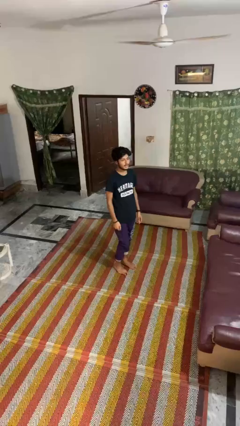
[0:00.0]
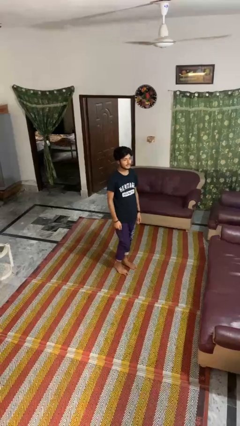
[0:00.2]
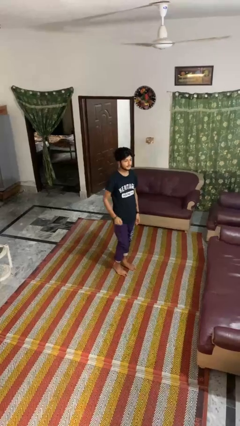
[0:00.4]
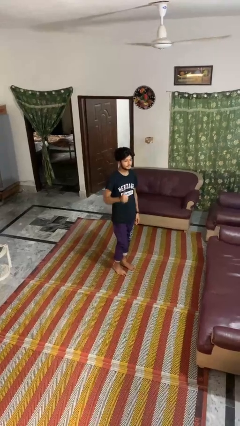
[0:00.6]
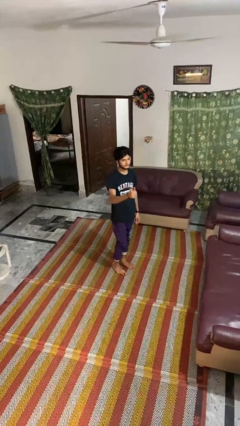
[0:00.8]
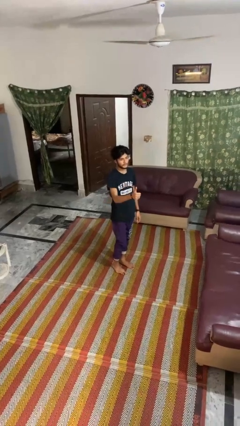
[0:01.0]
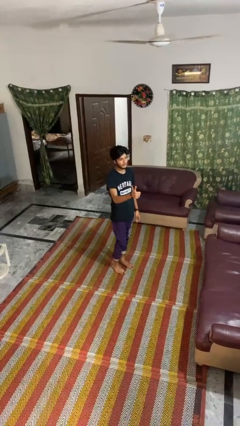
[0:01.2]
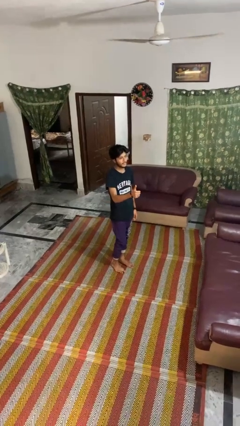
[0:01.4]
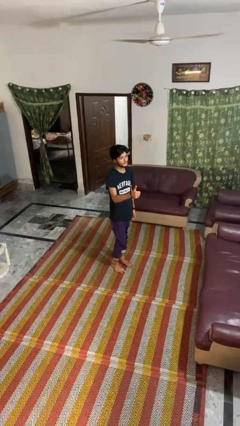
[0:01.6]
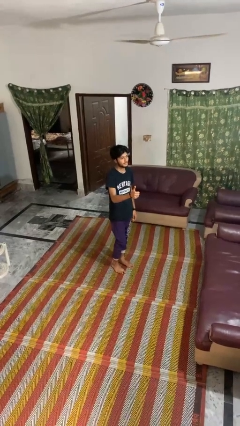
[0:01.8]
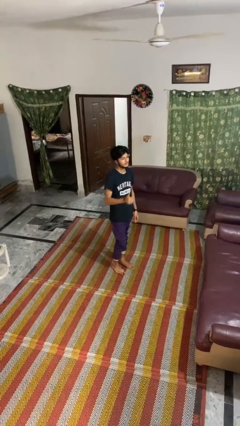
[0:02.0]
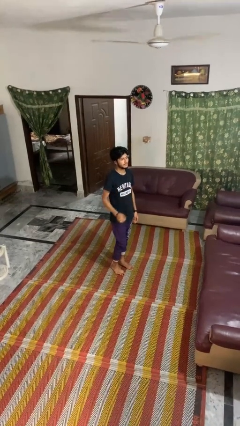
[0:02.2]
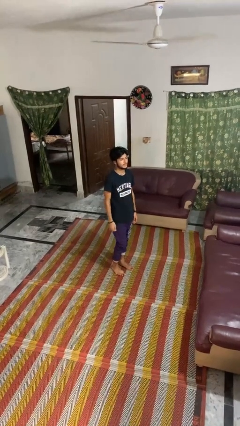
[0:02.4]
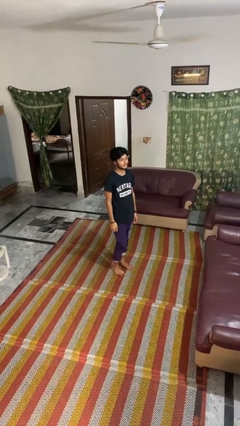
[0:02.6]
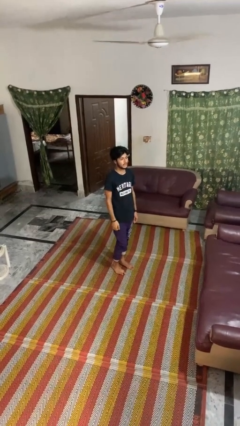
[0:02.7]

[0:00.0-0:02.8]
person gestures thumbs up

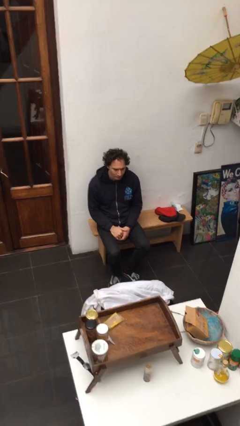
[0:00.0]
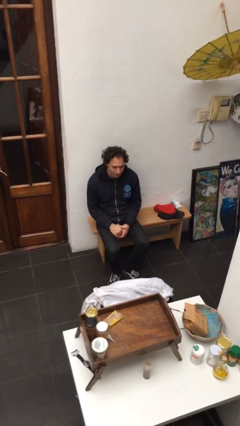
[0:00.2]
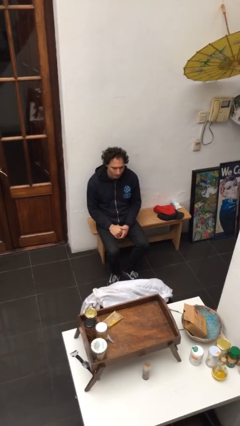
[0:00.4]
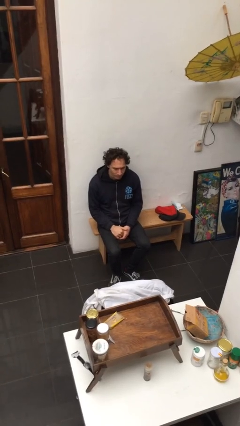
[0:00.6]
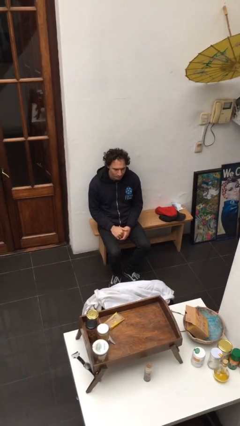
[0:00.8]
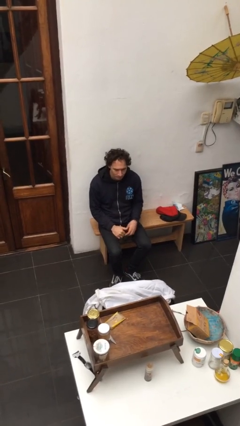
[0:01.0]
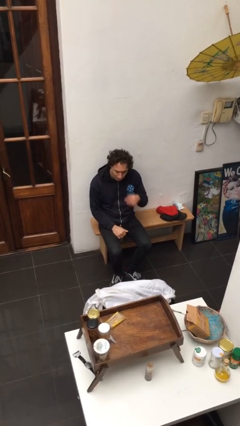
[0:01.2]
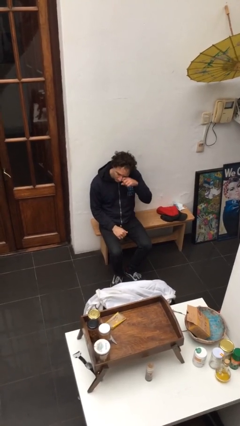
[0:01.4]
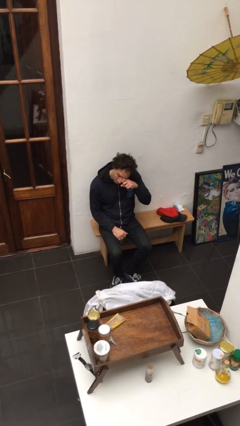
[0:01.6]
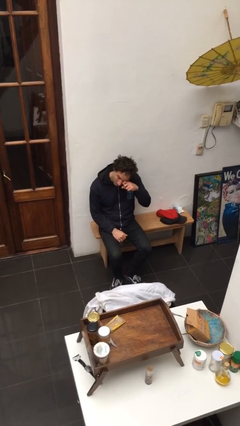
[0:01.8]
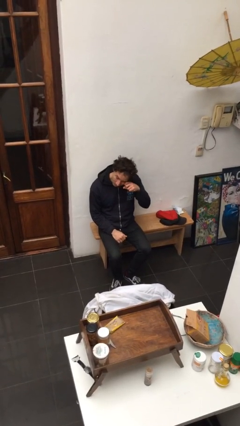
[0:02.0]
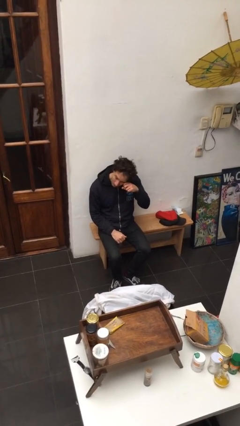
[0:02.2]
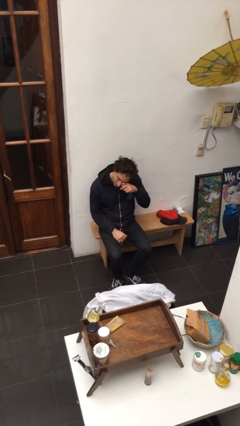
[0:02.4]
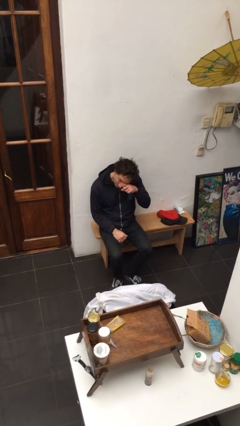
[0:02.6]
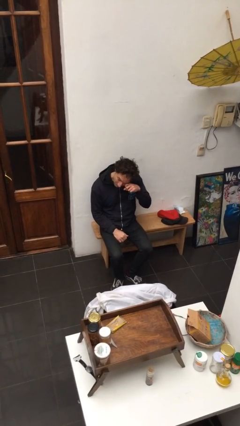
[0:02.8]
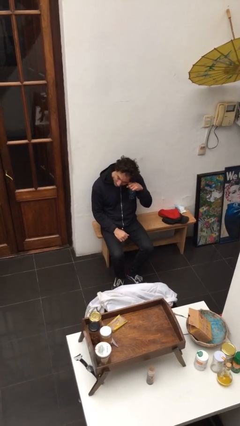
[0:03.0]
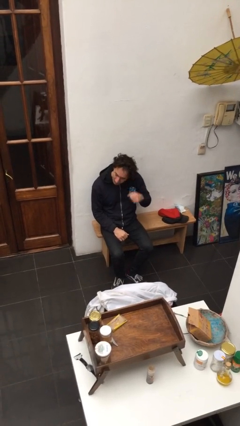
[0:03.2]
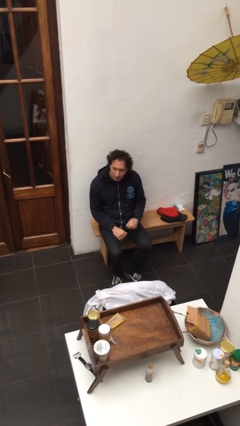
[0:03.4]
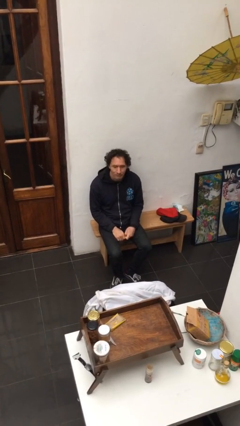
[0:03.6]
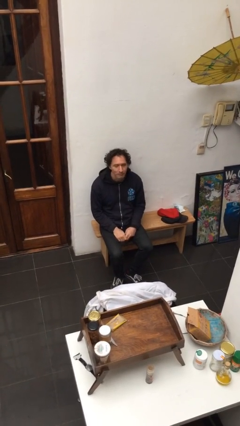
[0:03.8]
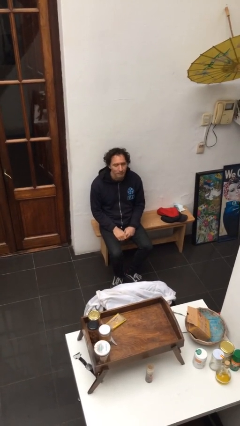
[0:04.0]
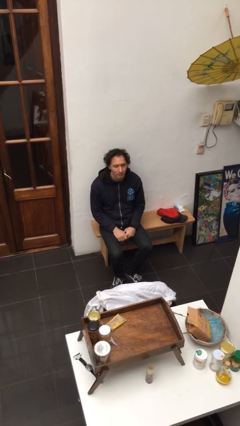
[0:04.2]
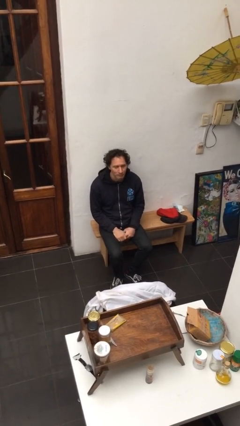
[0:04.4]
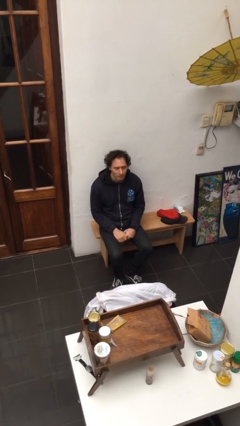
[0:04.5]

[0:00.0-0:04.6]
person scratches face

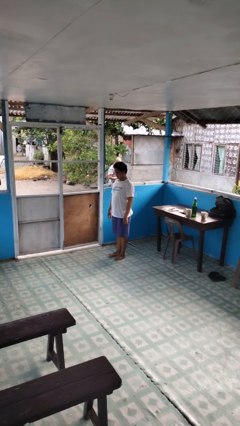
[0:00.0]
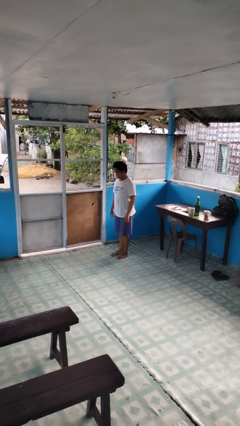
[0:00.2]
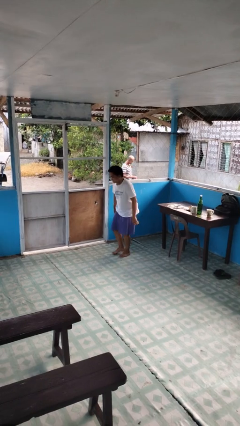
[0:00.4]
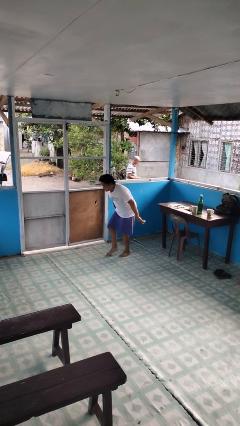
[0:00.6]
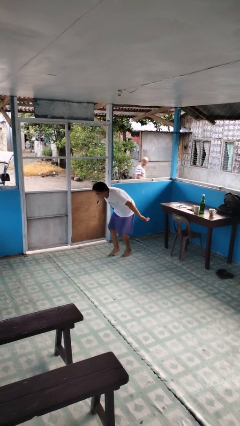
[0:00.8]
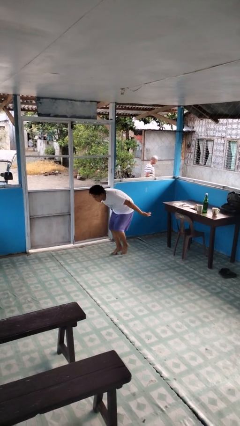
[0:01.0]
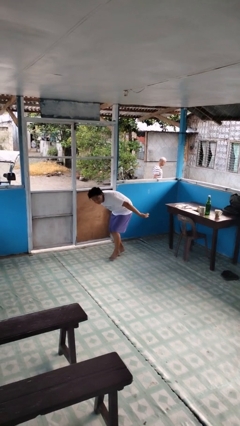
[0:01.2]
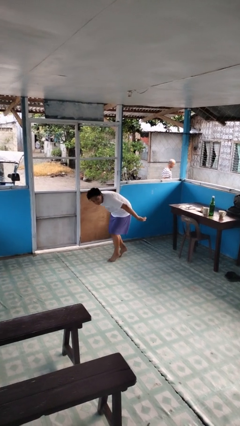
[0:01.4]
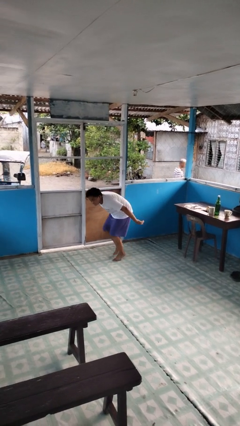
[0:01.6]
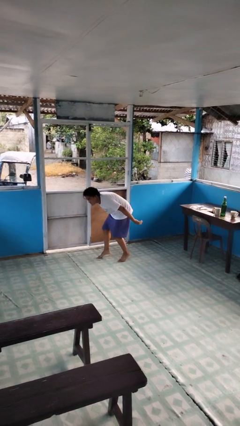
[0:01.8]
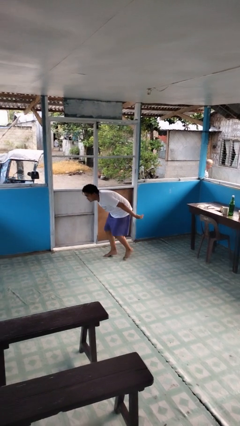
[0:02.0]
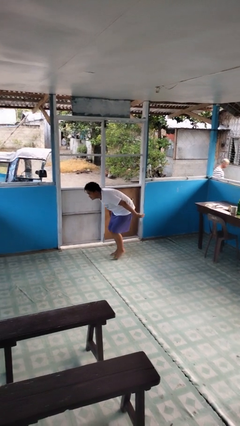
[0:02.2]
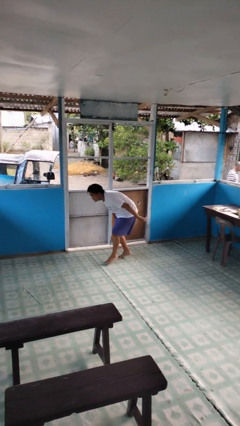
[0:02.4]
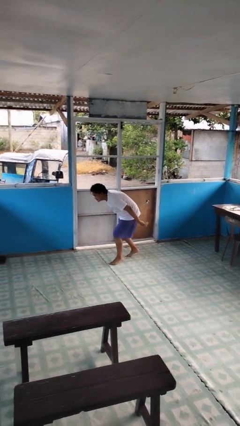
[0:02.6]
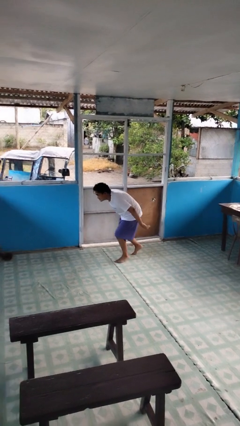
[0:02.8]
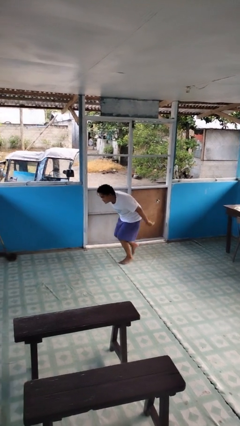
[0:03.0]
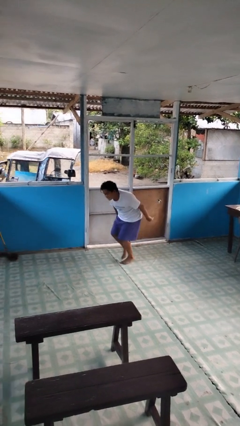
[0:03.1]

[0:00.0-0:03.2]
person walks tiptoe

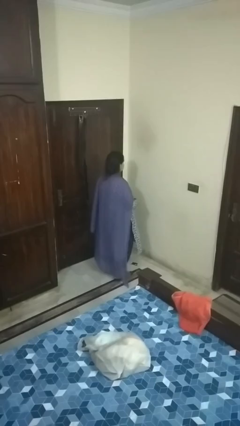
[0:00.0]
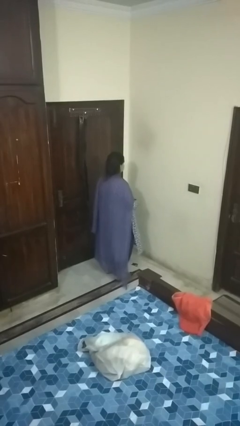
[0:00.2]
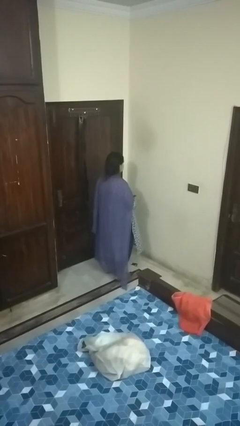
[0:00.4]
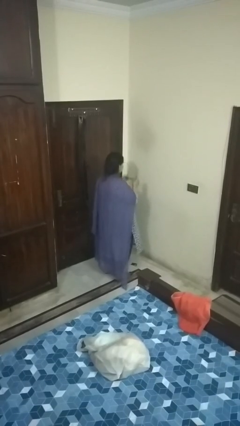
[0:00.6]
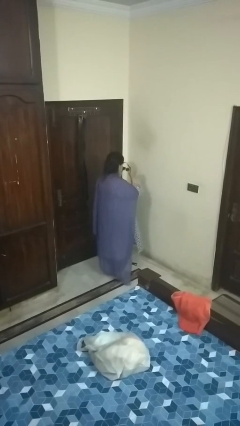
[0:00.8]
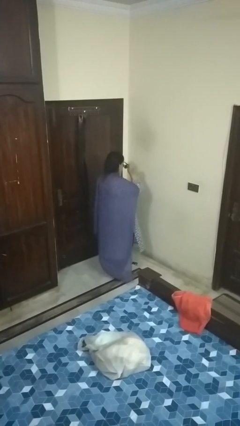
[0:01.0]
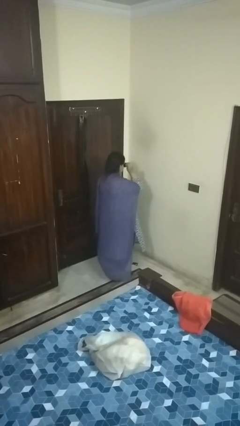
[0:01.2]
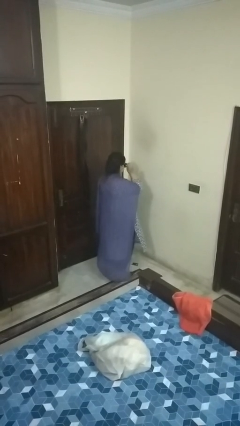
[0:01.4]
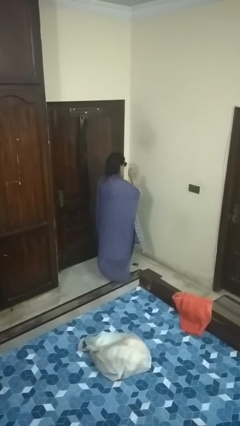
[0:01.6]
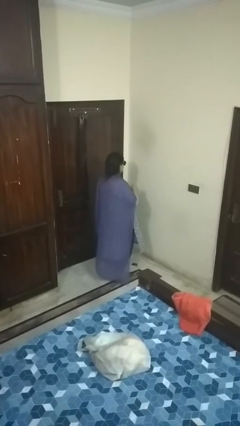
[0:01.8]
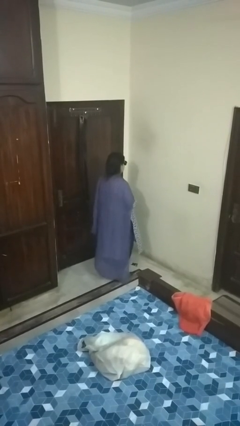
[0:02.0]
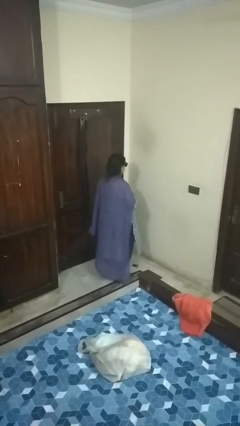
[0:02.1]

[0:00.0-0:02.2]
person puts on sunglasses

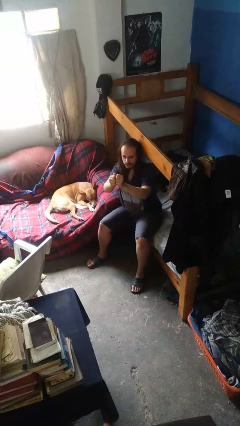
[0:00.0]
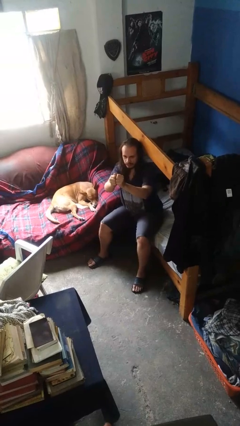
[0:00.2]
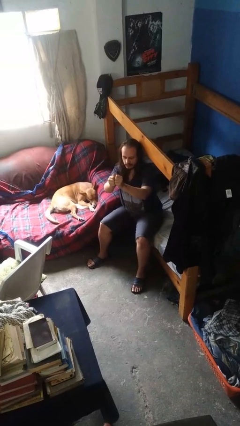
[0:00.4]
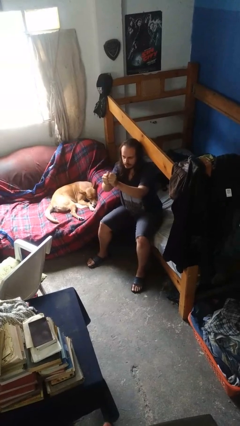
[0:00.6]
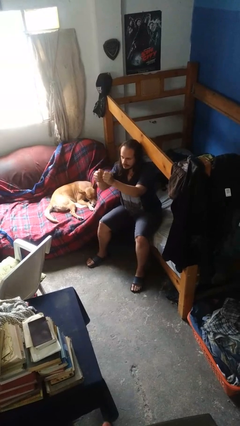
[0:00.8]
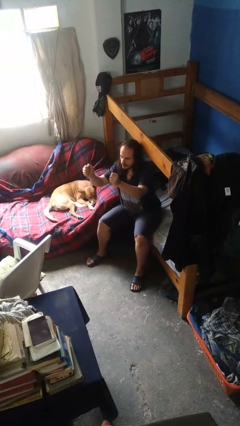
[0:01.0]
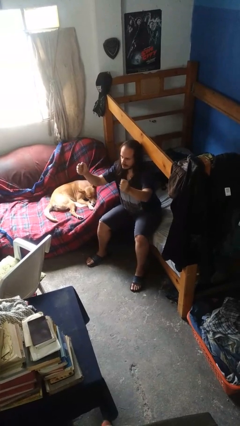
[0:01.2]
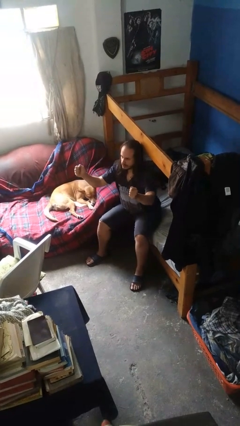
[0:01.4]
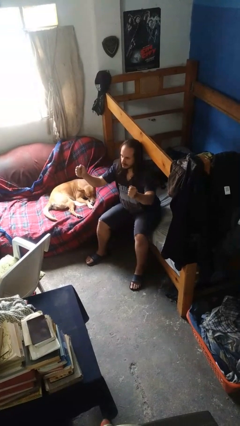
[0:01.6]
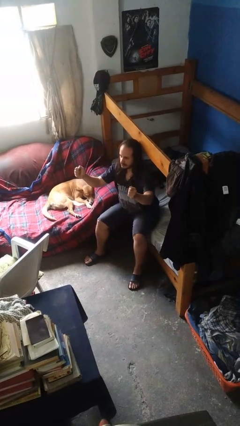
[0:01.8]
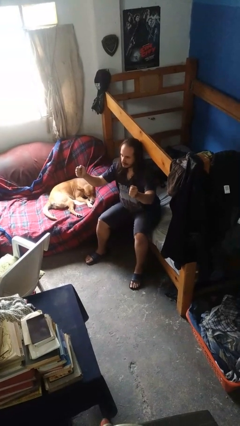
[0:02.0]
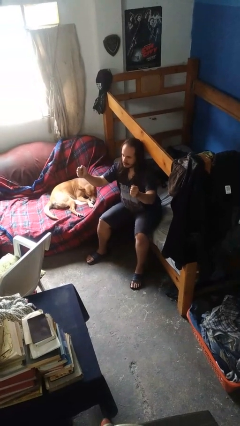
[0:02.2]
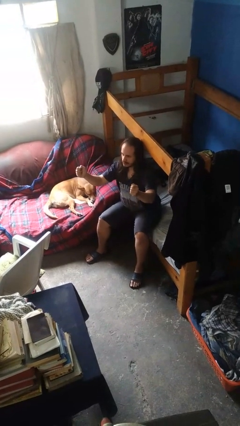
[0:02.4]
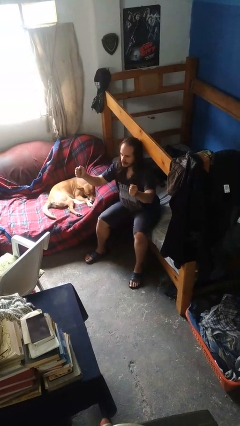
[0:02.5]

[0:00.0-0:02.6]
person gestures zoom in

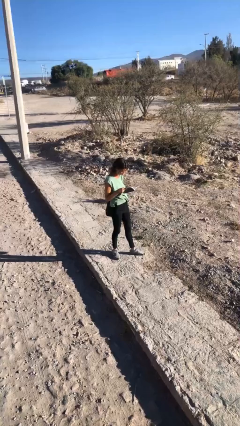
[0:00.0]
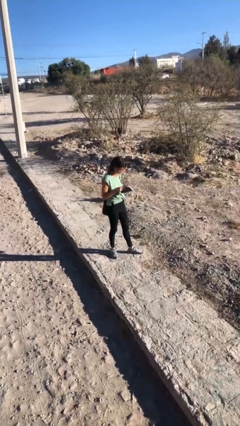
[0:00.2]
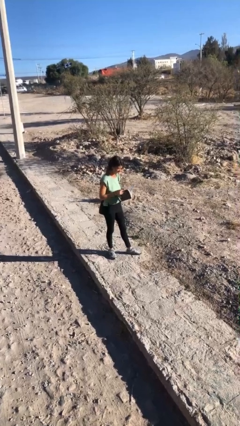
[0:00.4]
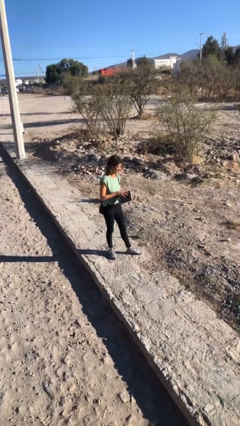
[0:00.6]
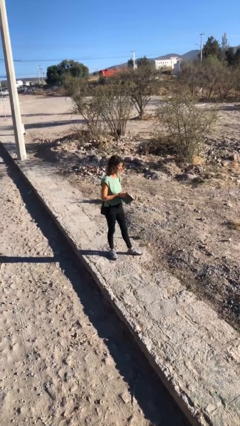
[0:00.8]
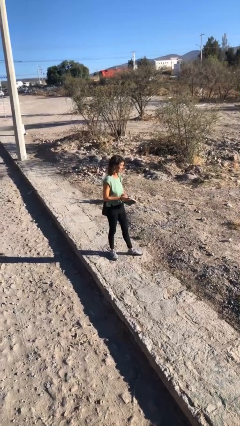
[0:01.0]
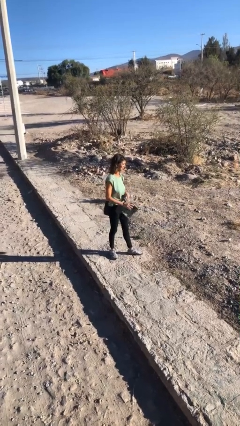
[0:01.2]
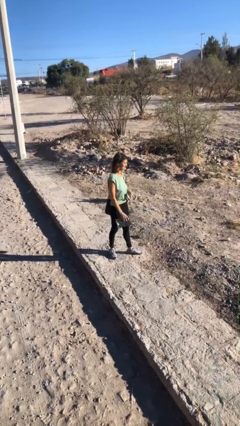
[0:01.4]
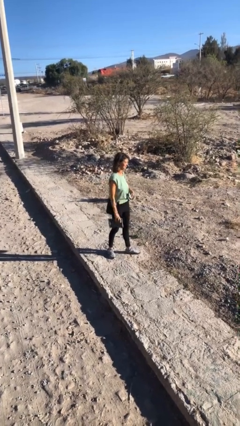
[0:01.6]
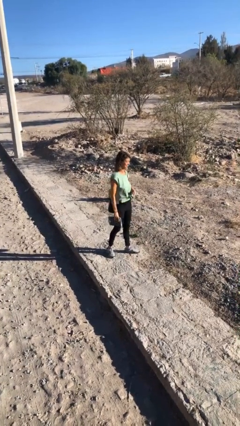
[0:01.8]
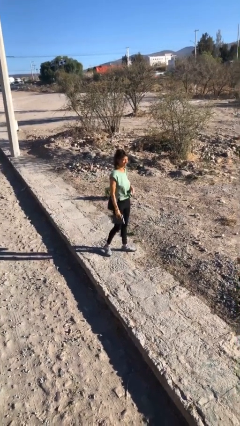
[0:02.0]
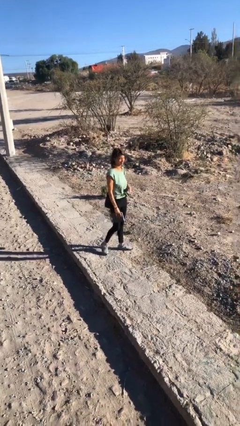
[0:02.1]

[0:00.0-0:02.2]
person reads document
